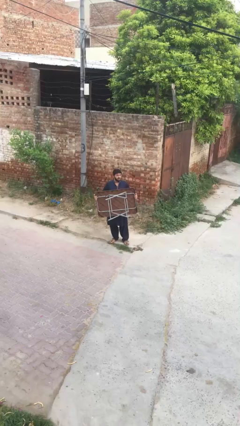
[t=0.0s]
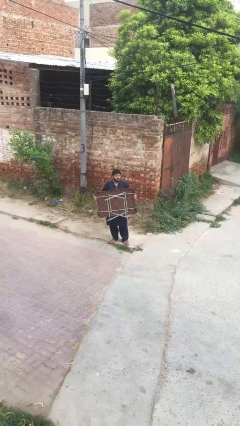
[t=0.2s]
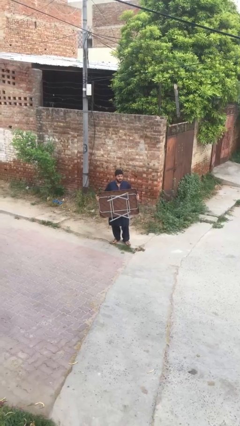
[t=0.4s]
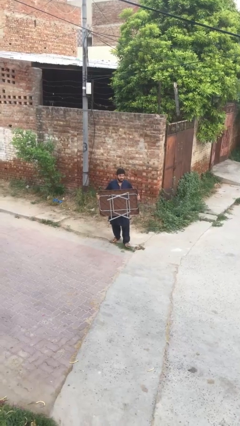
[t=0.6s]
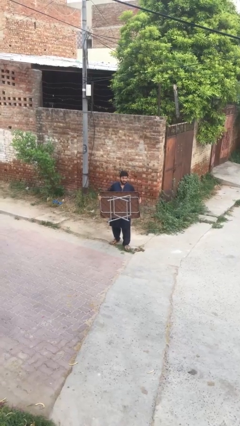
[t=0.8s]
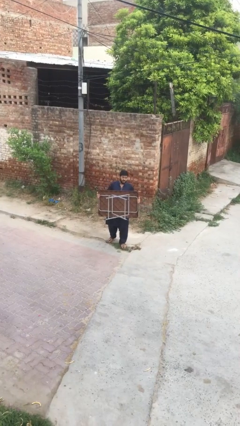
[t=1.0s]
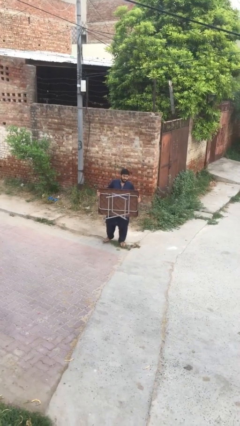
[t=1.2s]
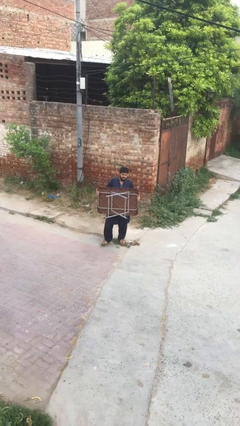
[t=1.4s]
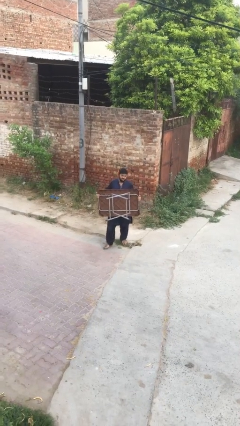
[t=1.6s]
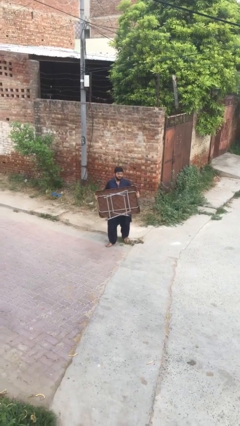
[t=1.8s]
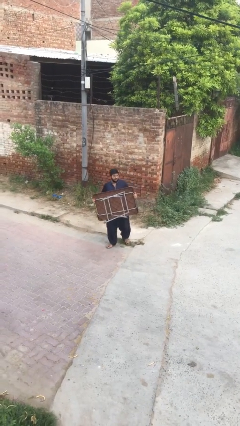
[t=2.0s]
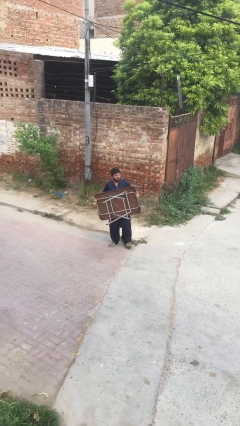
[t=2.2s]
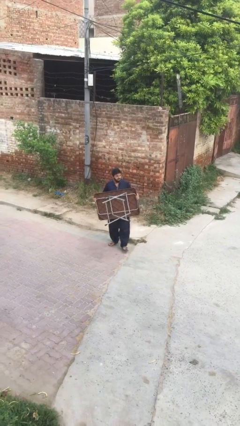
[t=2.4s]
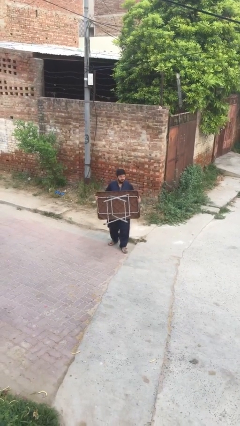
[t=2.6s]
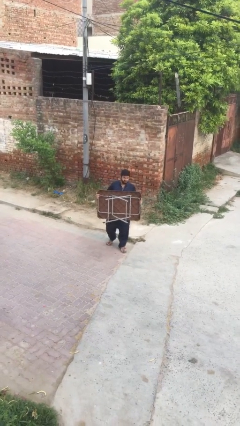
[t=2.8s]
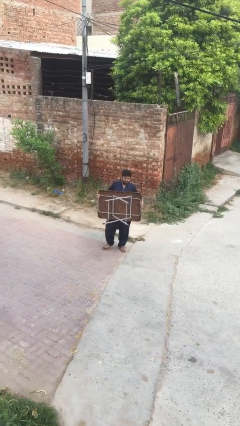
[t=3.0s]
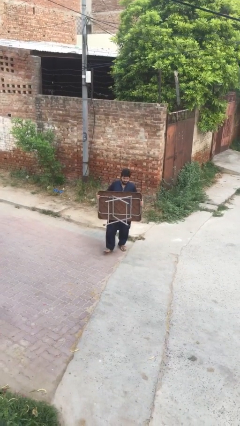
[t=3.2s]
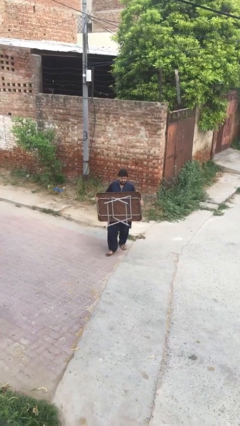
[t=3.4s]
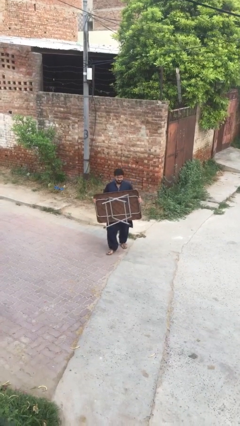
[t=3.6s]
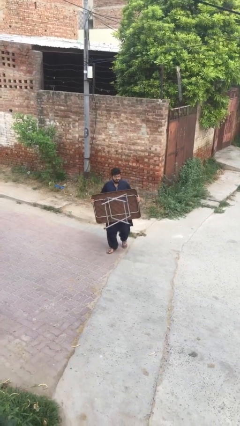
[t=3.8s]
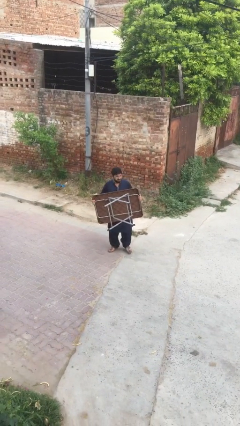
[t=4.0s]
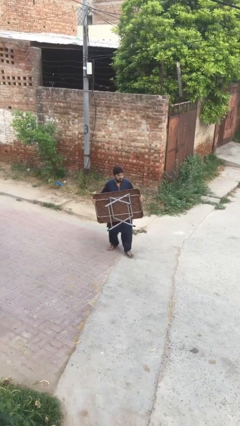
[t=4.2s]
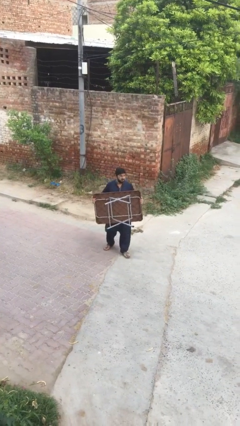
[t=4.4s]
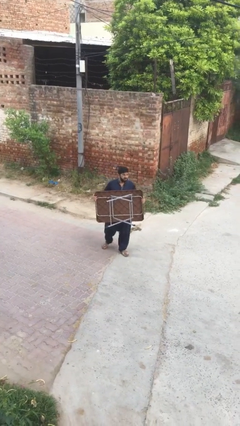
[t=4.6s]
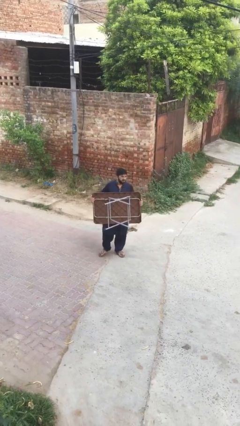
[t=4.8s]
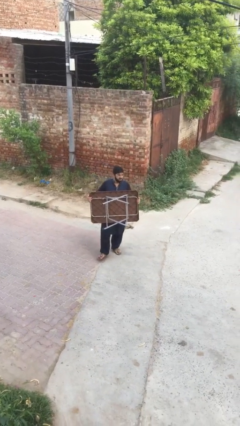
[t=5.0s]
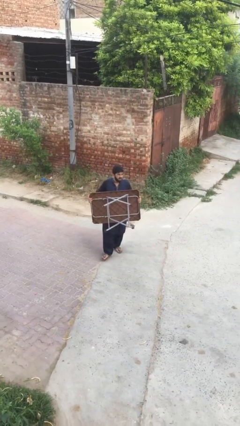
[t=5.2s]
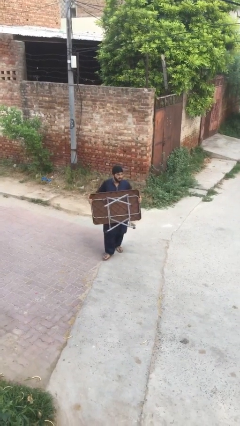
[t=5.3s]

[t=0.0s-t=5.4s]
person carries heavy object

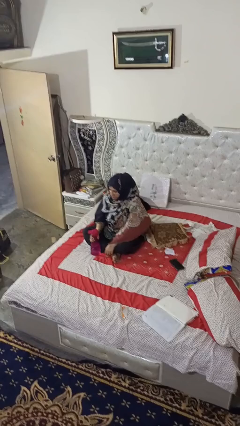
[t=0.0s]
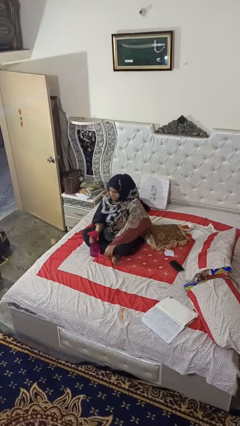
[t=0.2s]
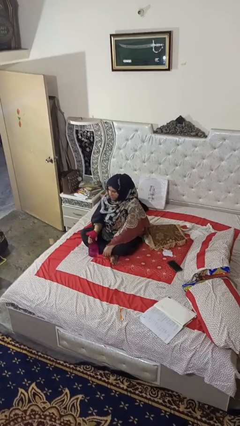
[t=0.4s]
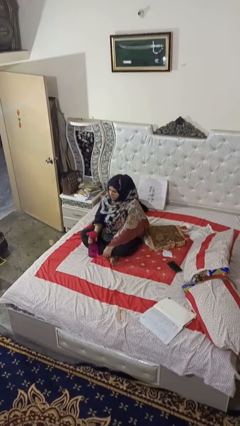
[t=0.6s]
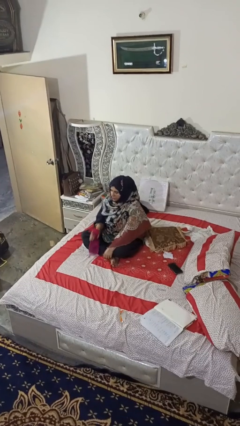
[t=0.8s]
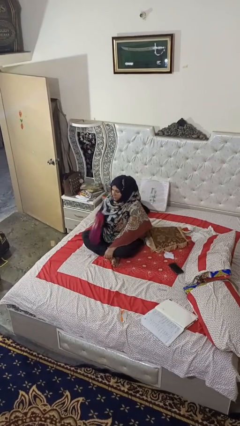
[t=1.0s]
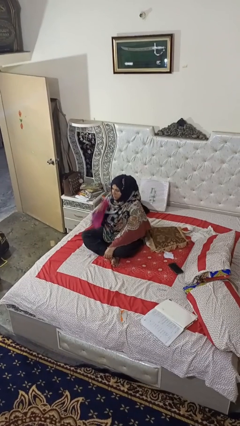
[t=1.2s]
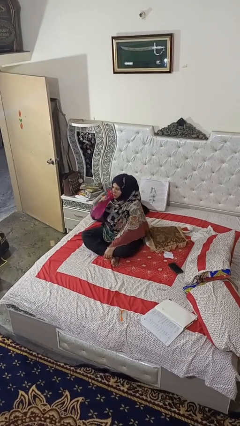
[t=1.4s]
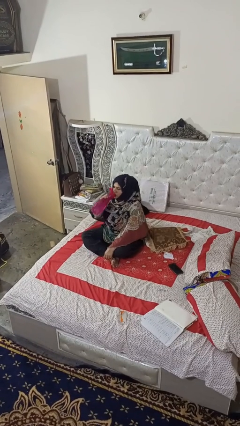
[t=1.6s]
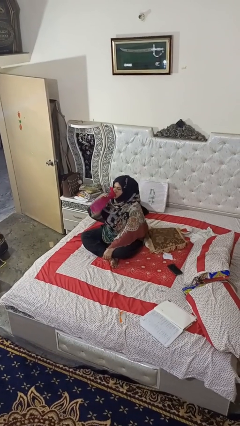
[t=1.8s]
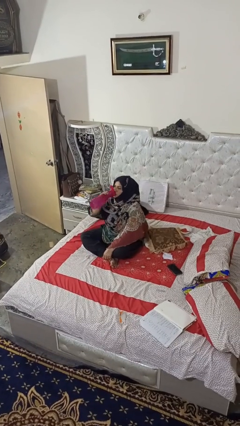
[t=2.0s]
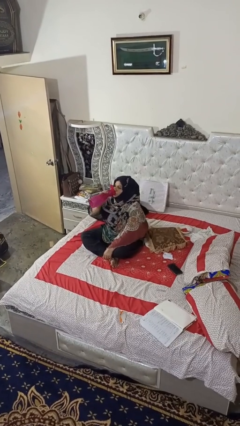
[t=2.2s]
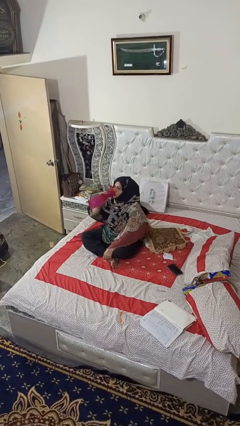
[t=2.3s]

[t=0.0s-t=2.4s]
person drinks from bottle

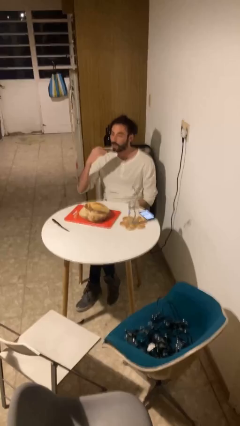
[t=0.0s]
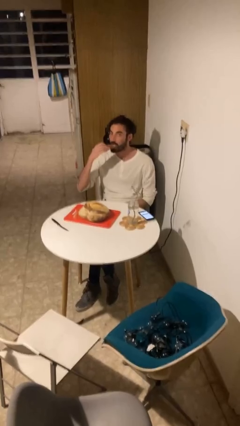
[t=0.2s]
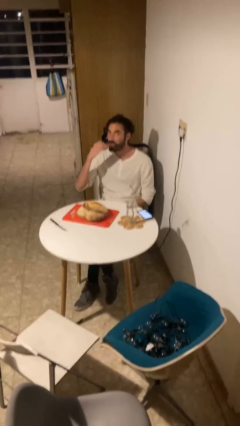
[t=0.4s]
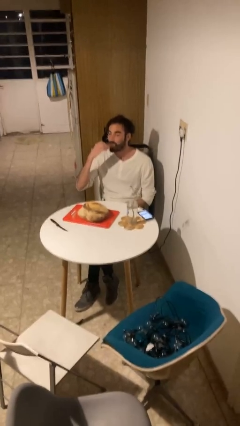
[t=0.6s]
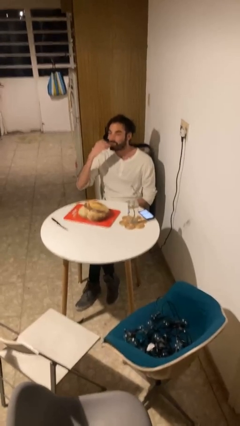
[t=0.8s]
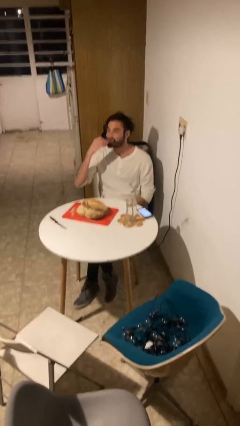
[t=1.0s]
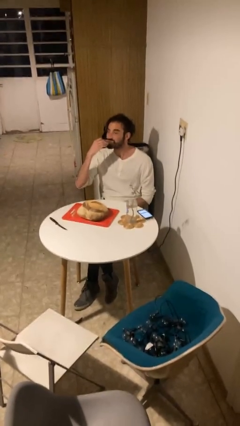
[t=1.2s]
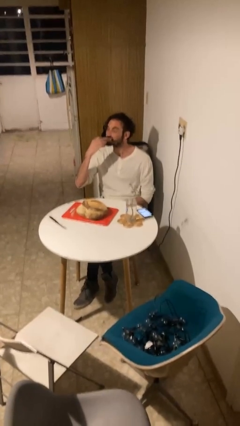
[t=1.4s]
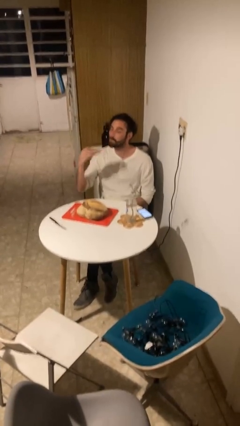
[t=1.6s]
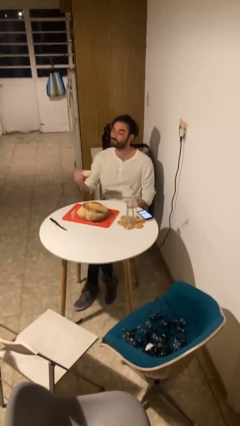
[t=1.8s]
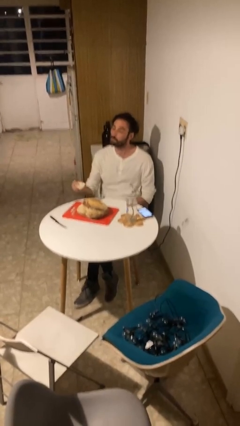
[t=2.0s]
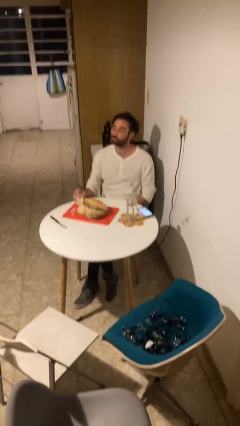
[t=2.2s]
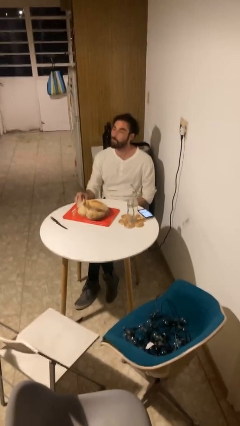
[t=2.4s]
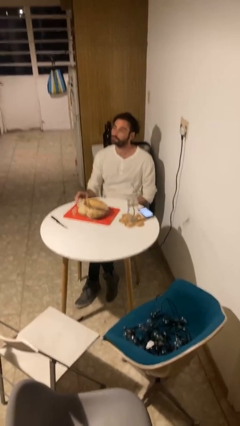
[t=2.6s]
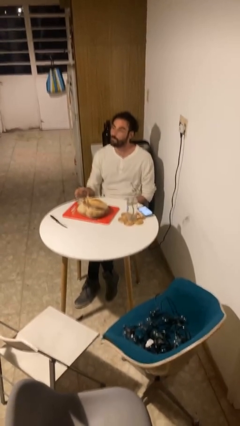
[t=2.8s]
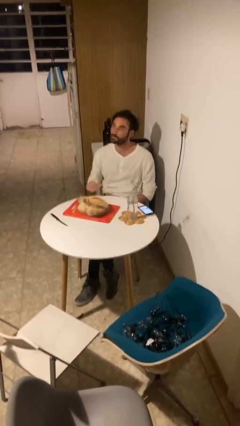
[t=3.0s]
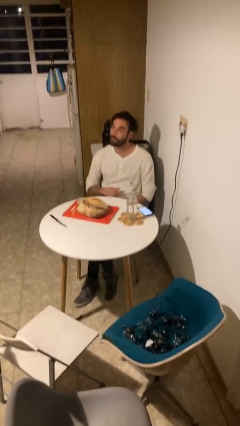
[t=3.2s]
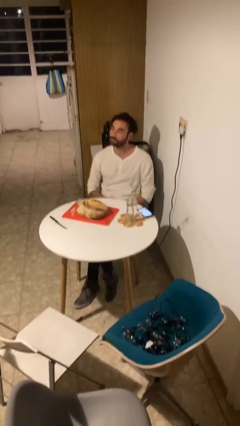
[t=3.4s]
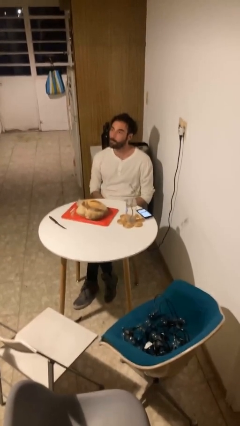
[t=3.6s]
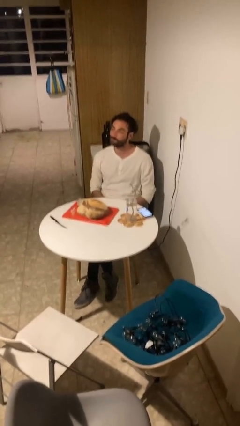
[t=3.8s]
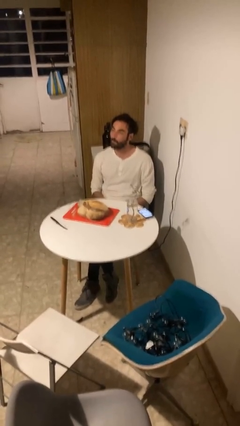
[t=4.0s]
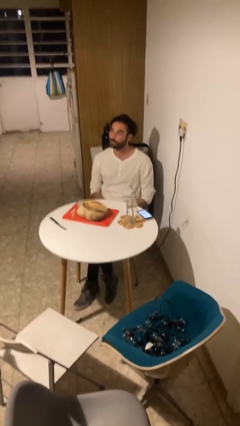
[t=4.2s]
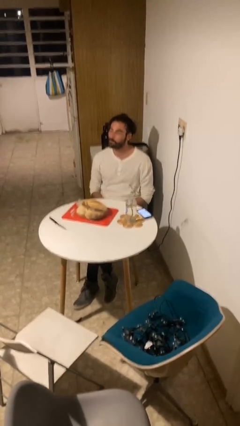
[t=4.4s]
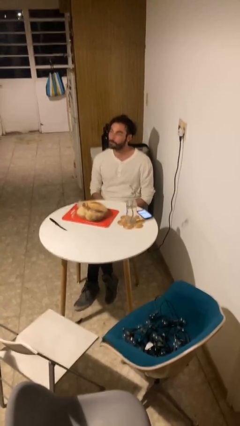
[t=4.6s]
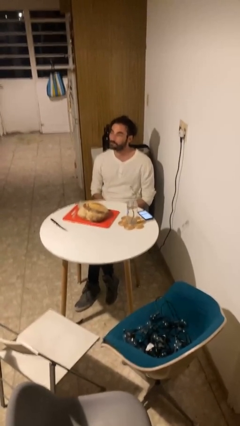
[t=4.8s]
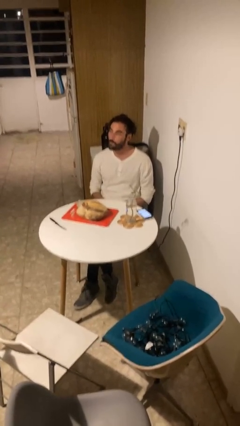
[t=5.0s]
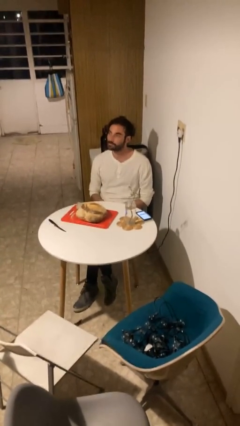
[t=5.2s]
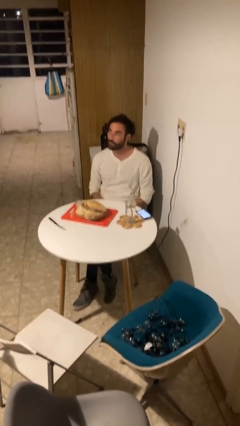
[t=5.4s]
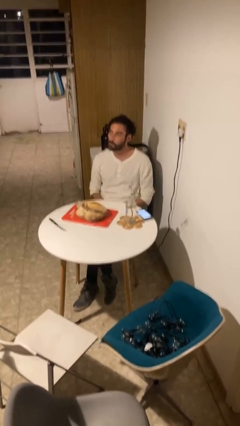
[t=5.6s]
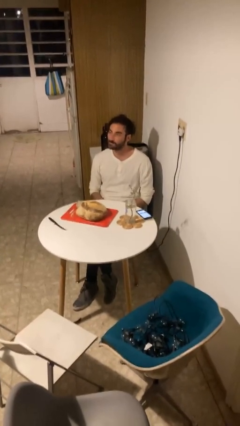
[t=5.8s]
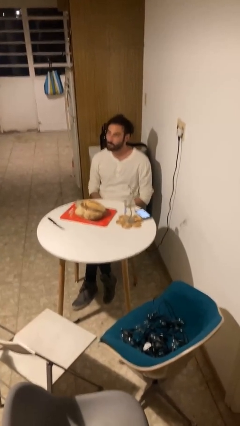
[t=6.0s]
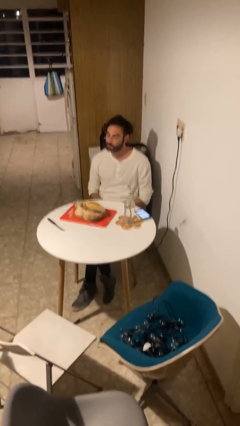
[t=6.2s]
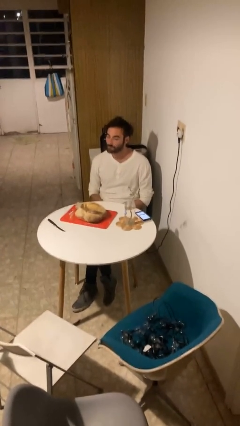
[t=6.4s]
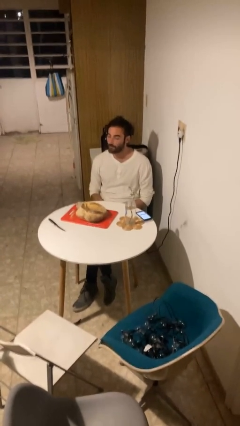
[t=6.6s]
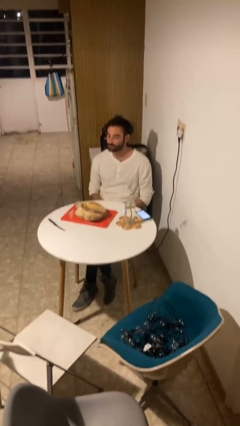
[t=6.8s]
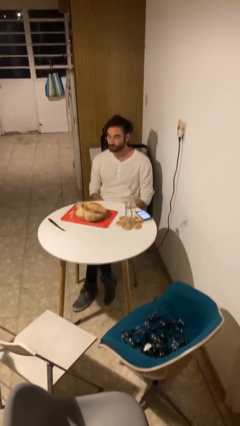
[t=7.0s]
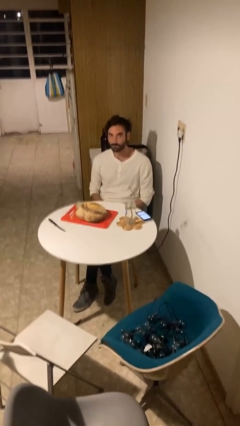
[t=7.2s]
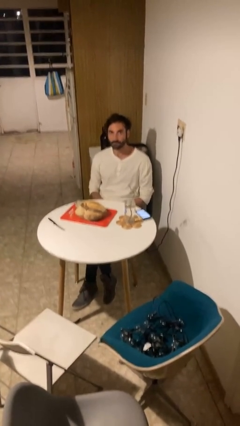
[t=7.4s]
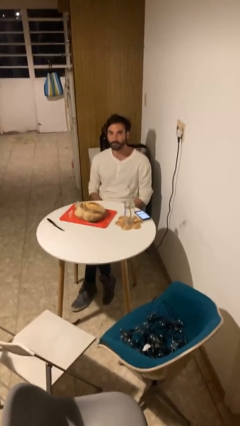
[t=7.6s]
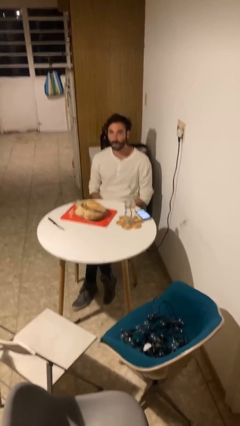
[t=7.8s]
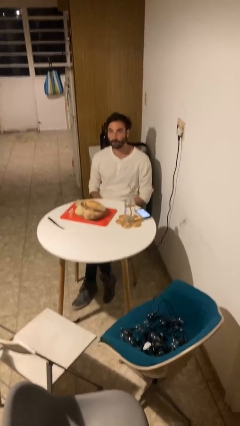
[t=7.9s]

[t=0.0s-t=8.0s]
person eats with hands

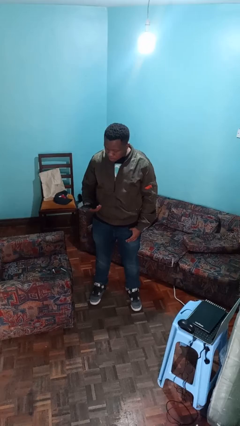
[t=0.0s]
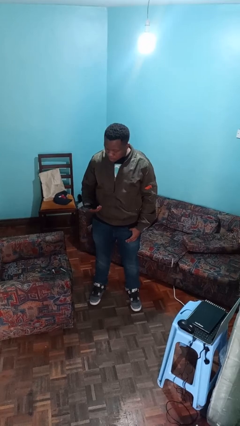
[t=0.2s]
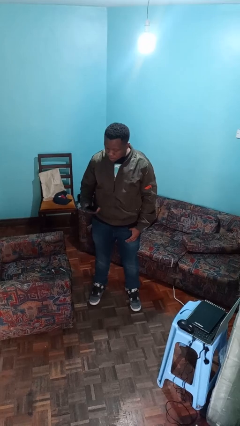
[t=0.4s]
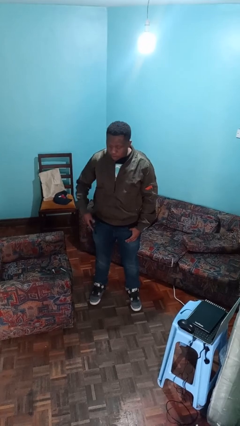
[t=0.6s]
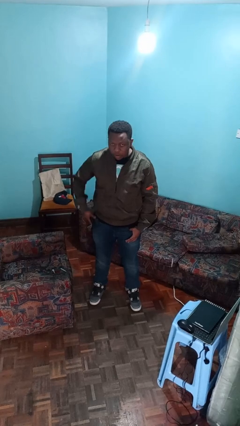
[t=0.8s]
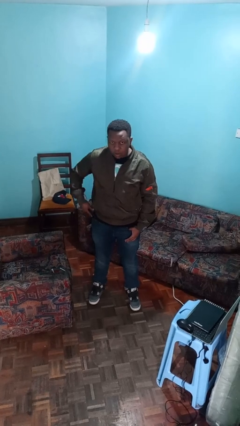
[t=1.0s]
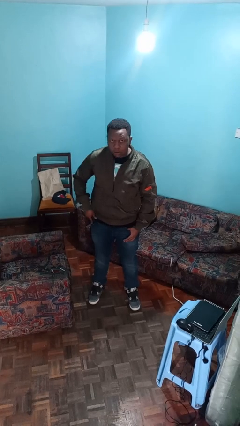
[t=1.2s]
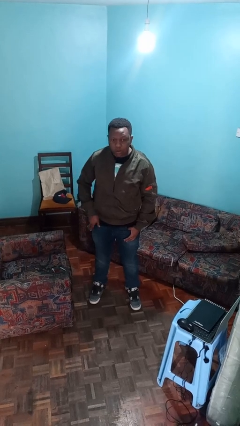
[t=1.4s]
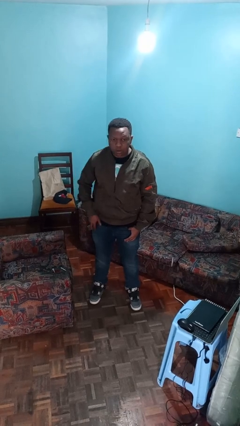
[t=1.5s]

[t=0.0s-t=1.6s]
person puts phone into pocket

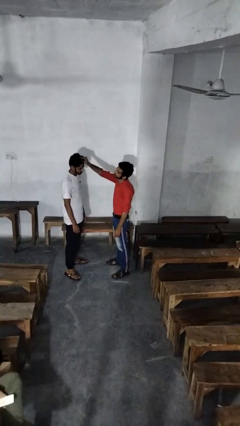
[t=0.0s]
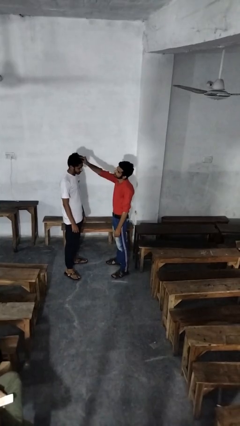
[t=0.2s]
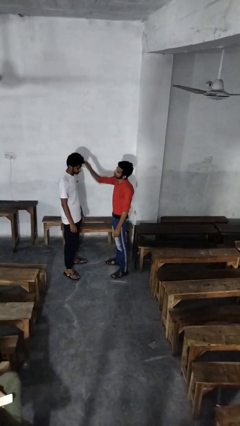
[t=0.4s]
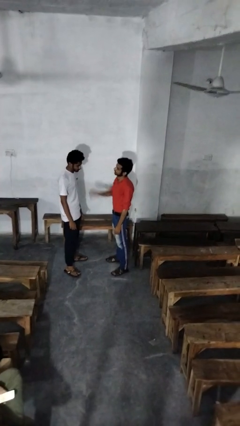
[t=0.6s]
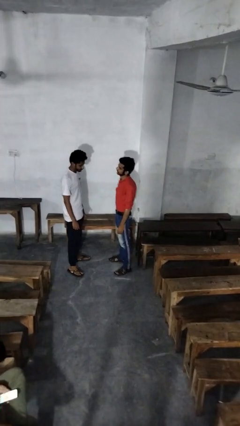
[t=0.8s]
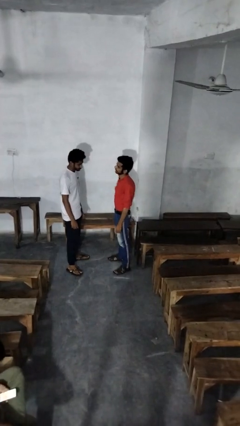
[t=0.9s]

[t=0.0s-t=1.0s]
person grabs person by hair
